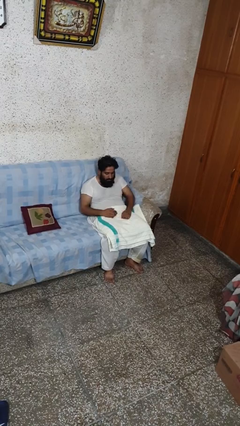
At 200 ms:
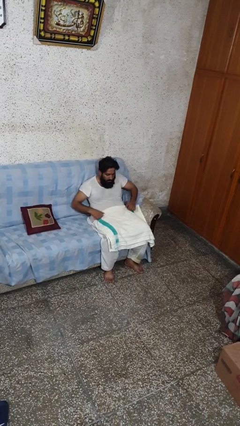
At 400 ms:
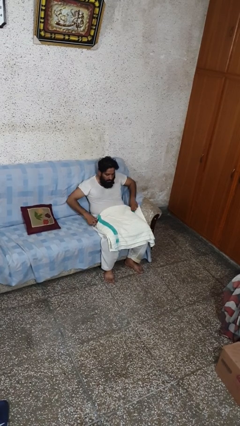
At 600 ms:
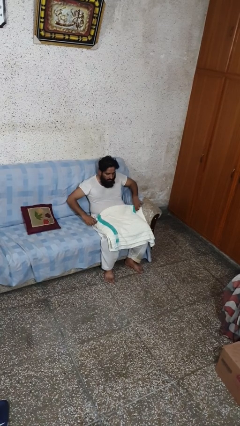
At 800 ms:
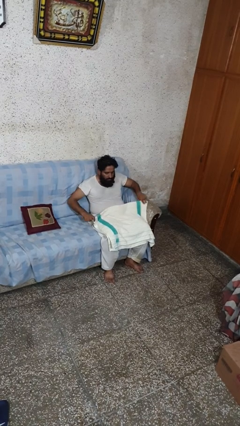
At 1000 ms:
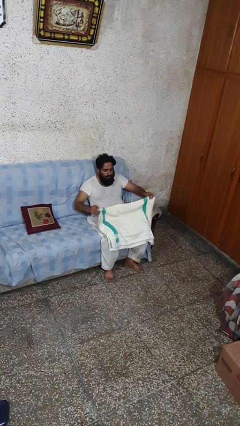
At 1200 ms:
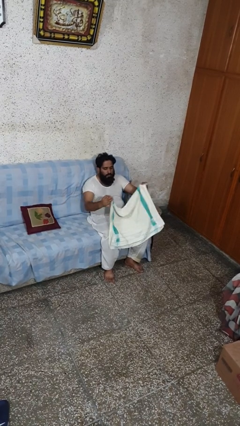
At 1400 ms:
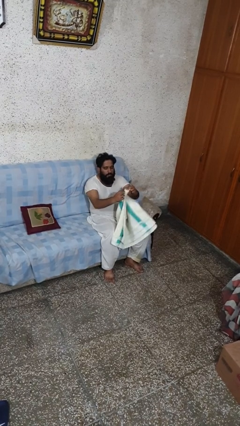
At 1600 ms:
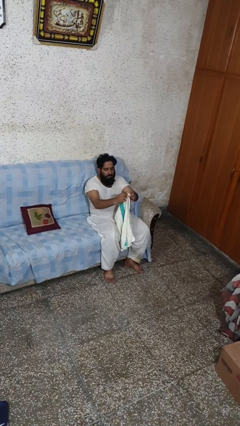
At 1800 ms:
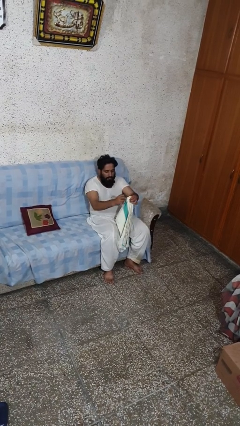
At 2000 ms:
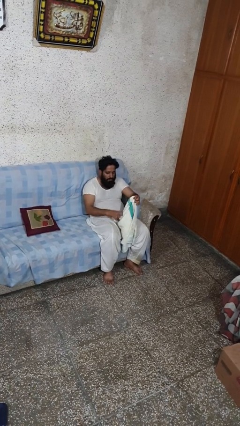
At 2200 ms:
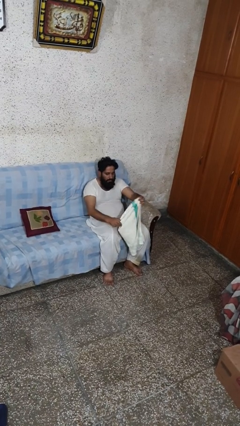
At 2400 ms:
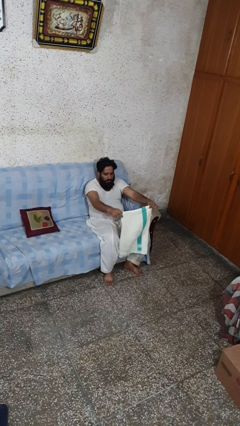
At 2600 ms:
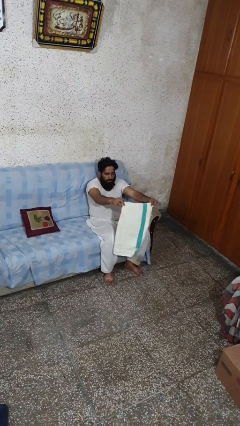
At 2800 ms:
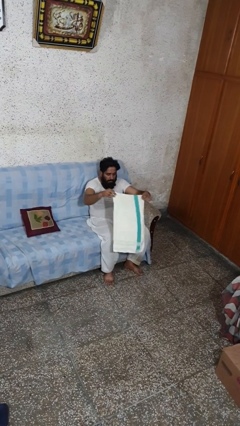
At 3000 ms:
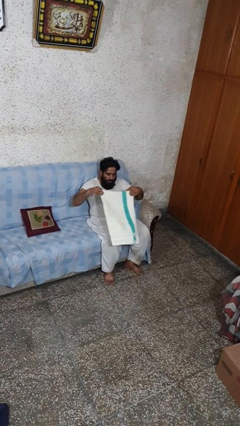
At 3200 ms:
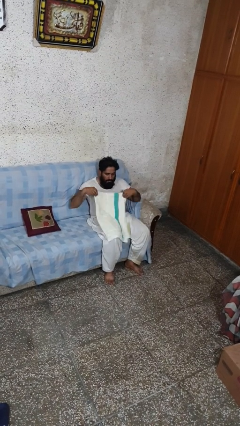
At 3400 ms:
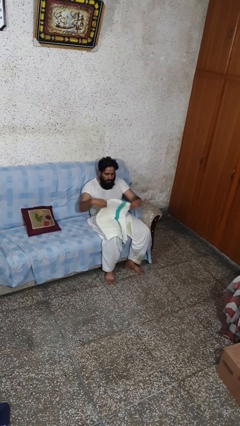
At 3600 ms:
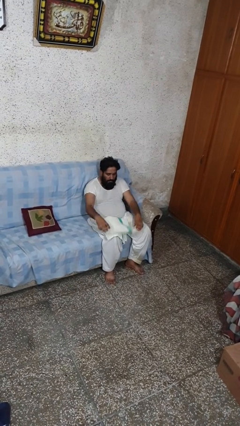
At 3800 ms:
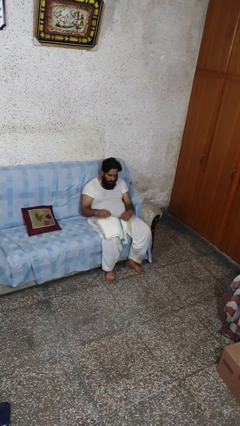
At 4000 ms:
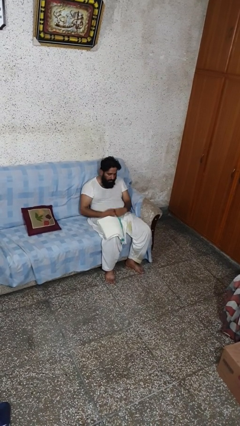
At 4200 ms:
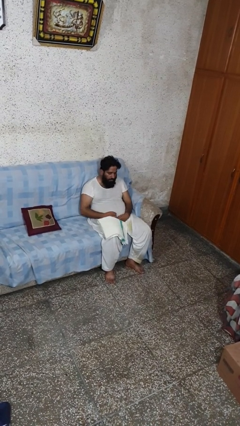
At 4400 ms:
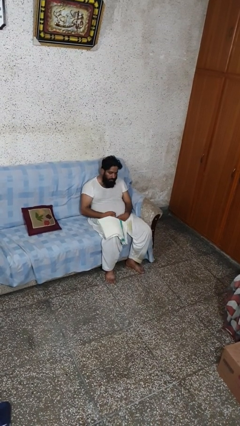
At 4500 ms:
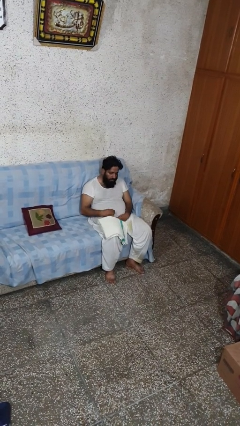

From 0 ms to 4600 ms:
person folds towel

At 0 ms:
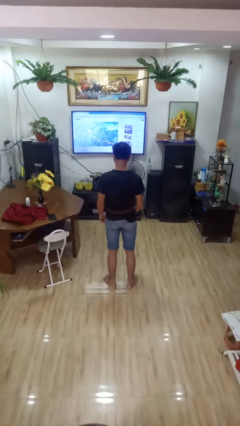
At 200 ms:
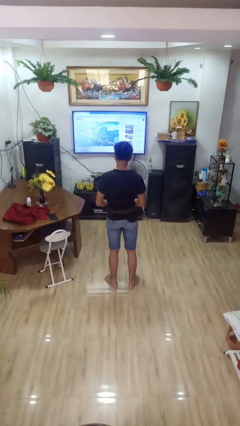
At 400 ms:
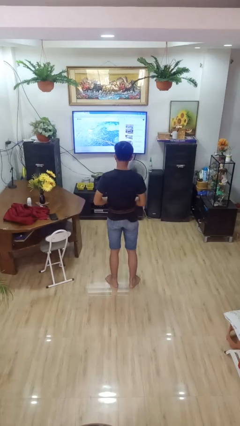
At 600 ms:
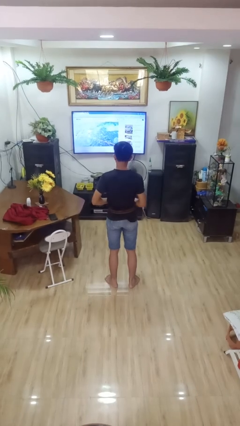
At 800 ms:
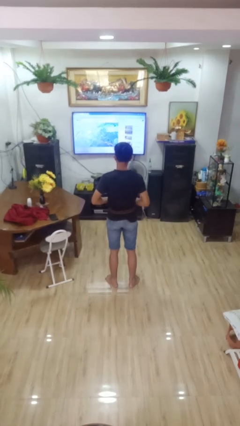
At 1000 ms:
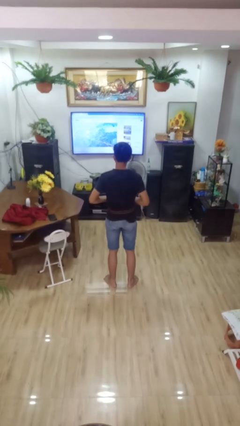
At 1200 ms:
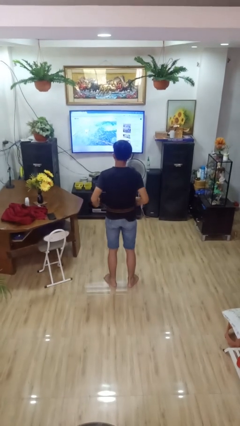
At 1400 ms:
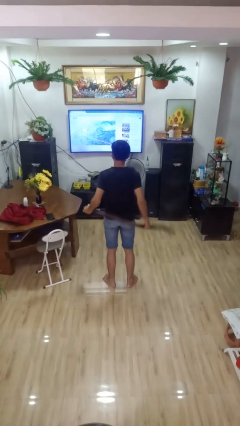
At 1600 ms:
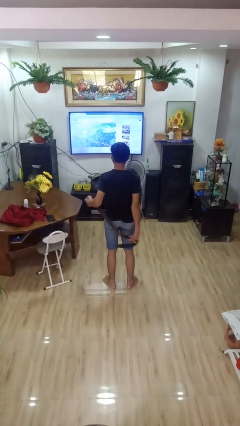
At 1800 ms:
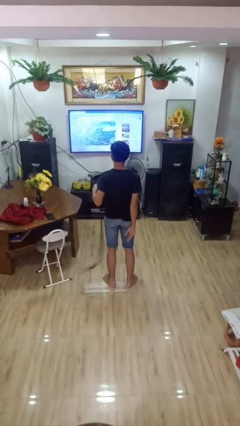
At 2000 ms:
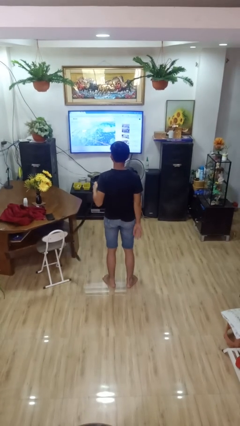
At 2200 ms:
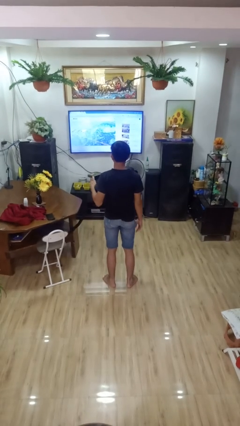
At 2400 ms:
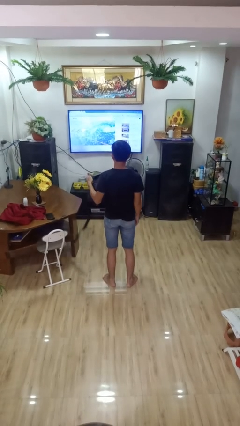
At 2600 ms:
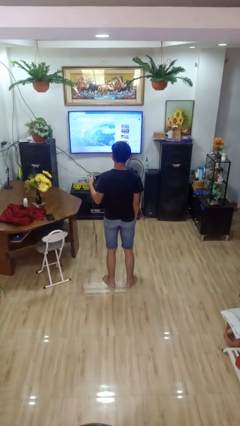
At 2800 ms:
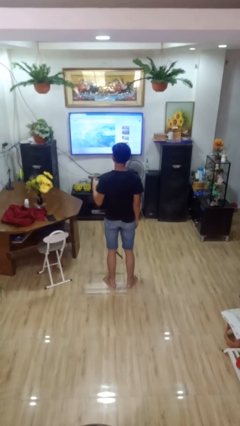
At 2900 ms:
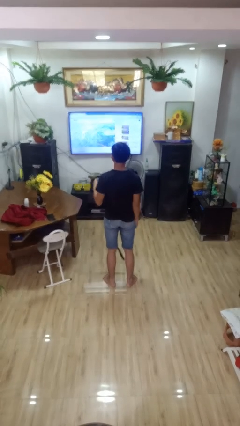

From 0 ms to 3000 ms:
person takes off belt

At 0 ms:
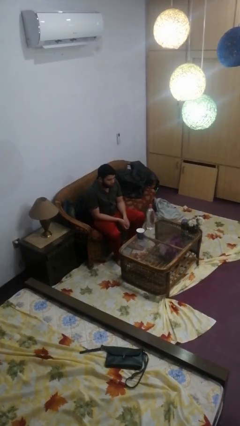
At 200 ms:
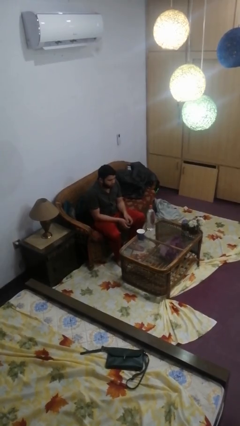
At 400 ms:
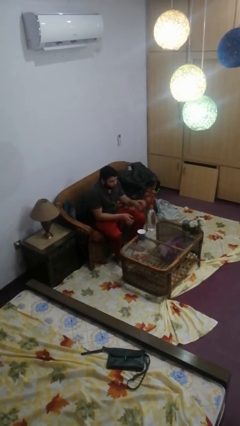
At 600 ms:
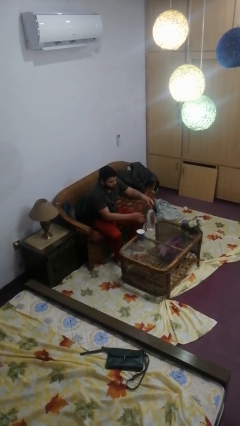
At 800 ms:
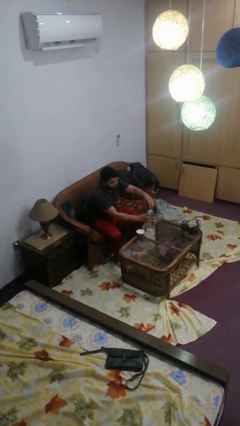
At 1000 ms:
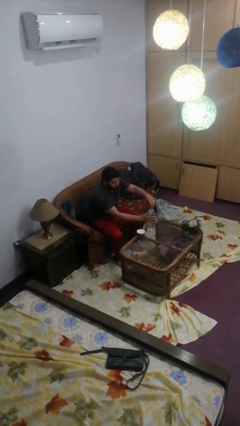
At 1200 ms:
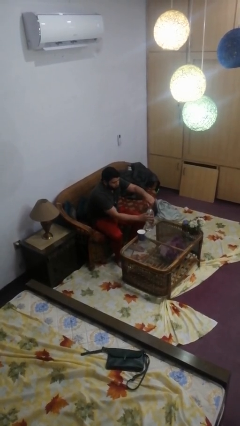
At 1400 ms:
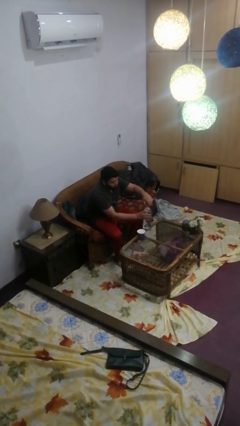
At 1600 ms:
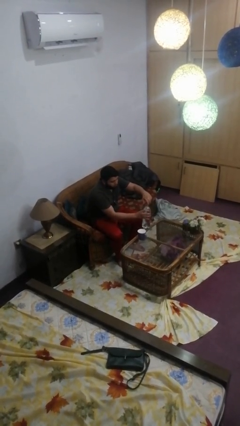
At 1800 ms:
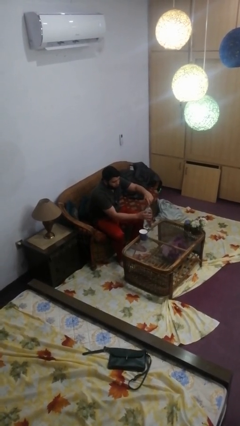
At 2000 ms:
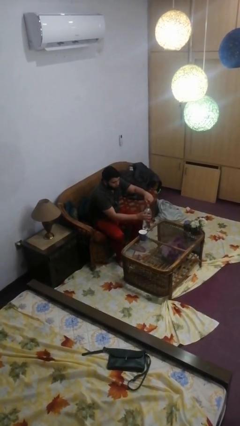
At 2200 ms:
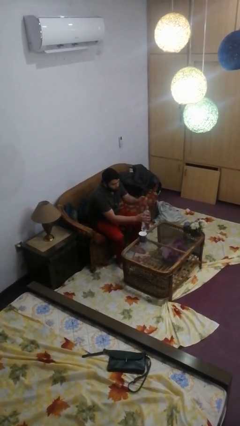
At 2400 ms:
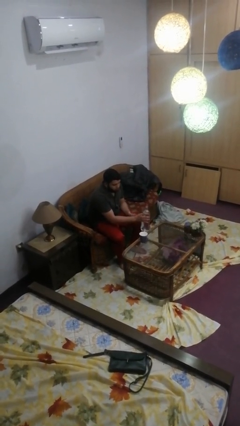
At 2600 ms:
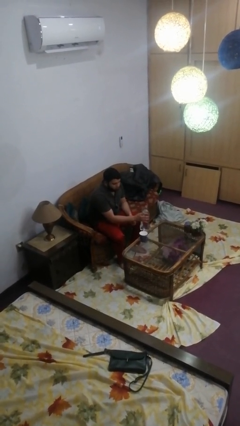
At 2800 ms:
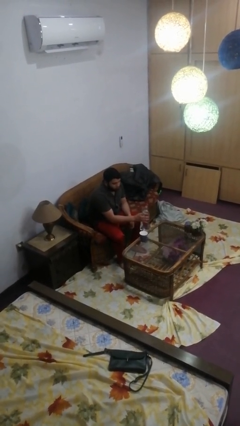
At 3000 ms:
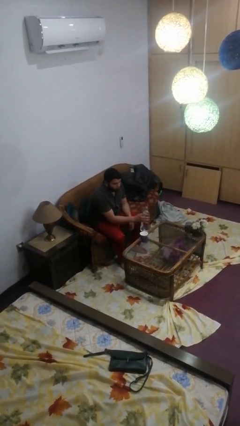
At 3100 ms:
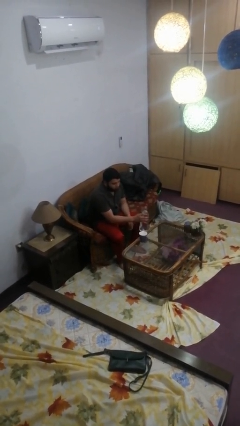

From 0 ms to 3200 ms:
person unscrews lid from bottle

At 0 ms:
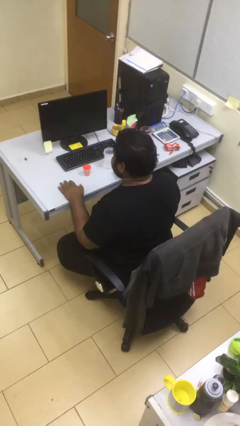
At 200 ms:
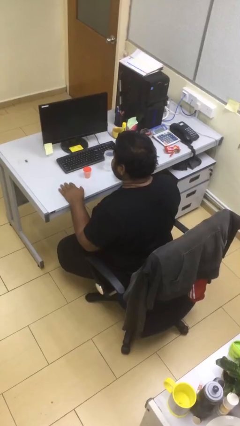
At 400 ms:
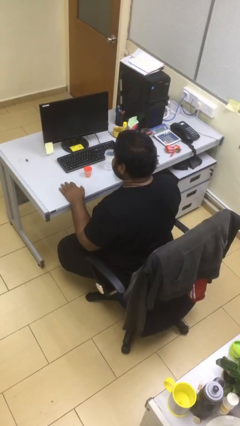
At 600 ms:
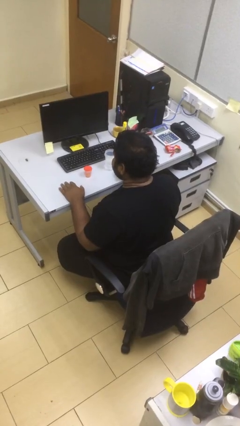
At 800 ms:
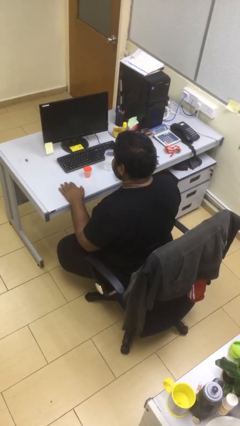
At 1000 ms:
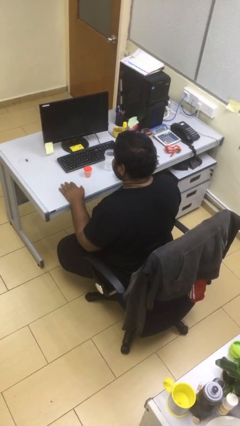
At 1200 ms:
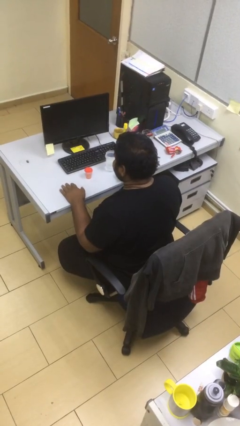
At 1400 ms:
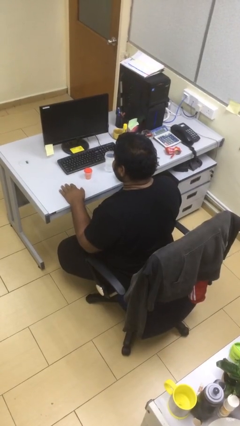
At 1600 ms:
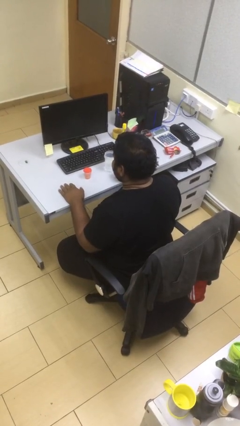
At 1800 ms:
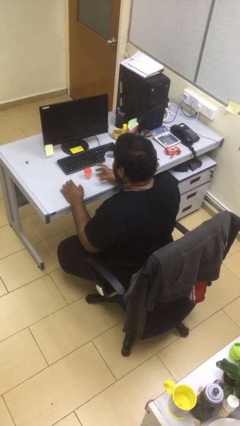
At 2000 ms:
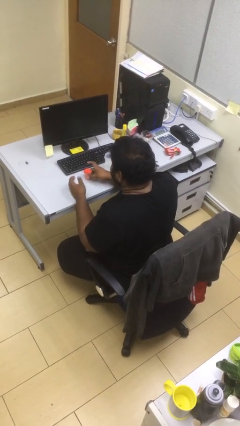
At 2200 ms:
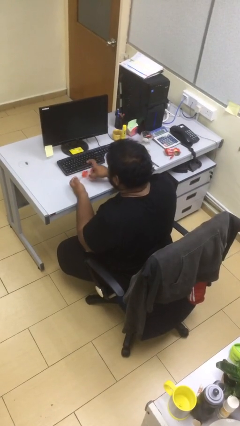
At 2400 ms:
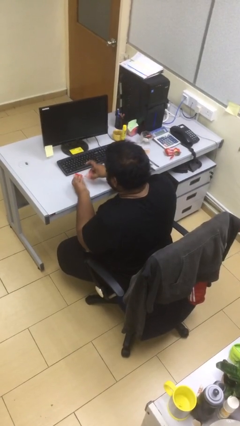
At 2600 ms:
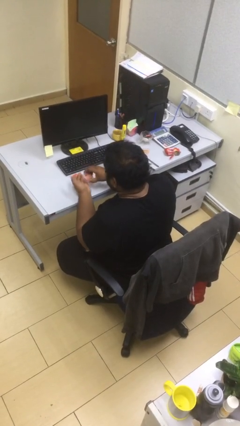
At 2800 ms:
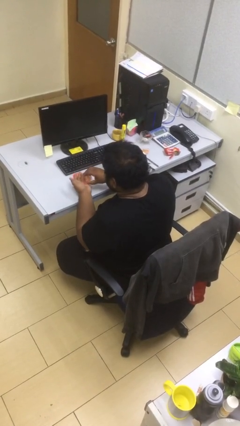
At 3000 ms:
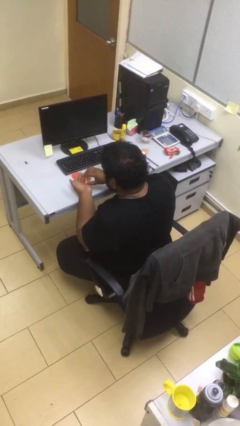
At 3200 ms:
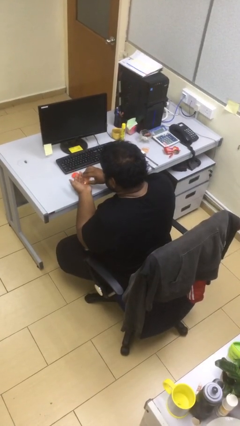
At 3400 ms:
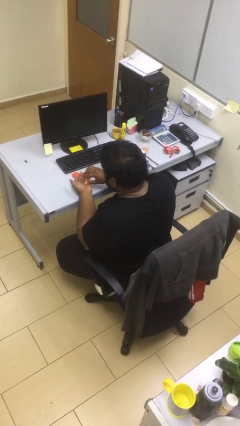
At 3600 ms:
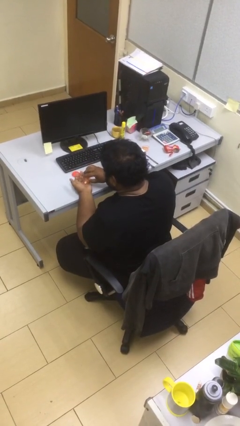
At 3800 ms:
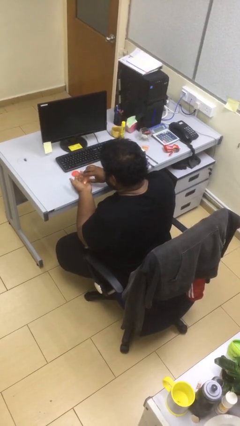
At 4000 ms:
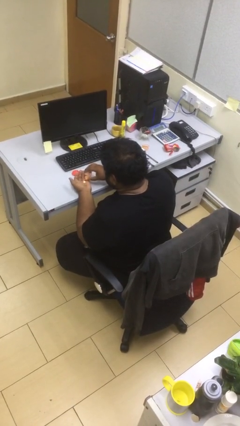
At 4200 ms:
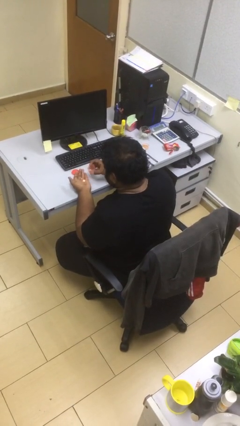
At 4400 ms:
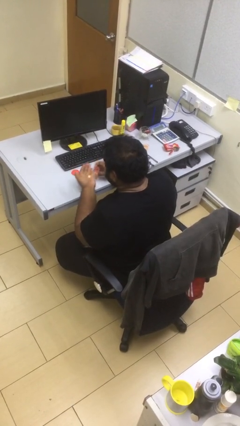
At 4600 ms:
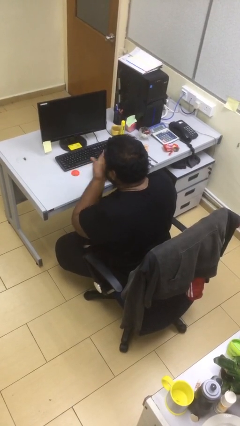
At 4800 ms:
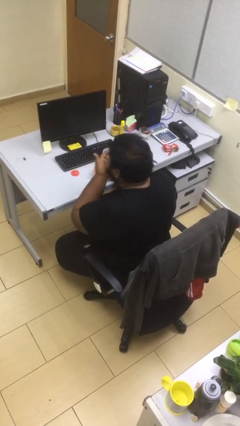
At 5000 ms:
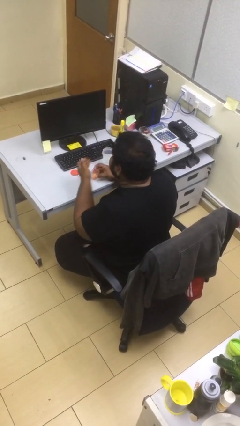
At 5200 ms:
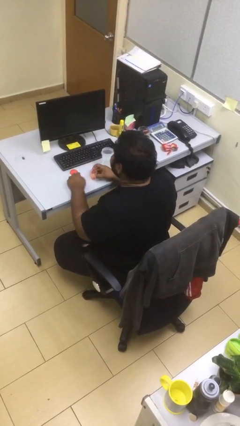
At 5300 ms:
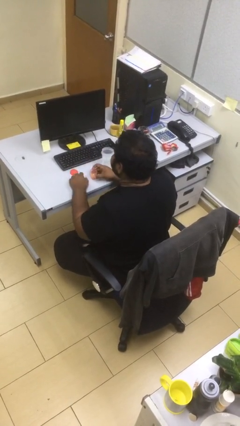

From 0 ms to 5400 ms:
person takes medicine pills

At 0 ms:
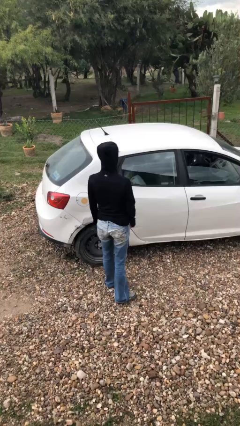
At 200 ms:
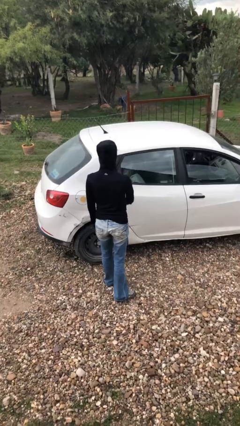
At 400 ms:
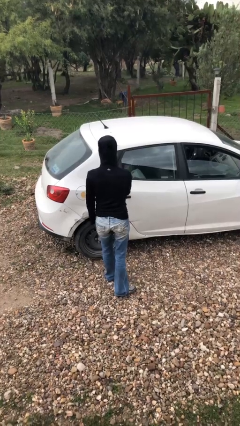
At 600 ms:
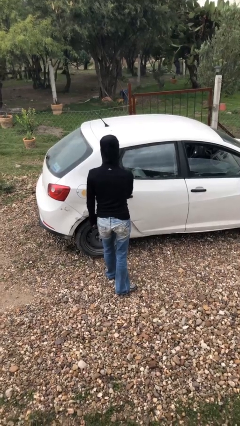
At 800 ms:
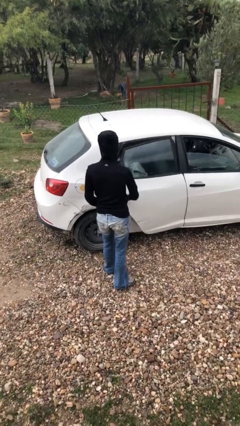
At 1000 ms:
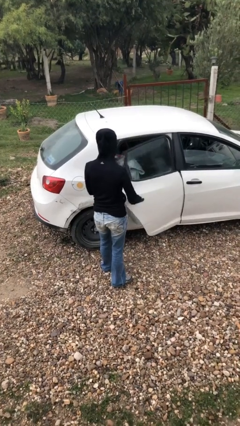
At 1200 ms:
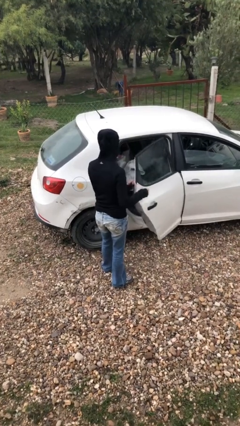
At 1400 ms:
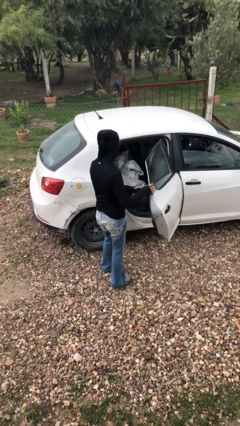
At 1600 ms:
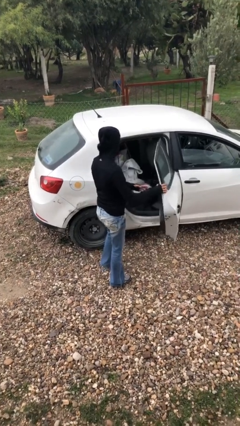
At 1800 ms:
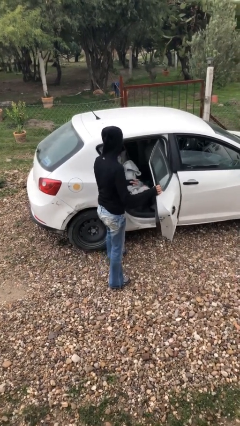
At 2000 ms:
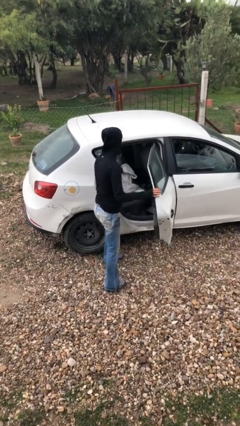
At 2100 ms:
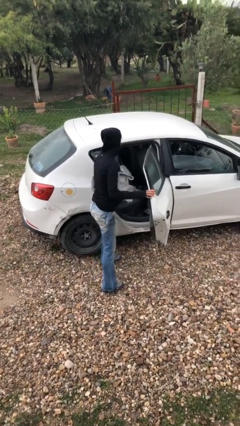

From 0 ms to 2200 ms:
person opens car door
